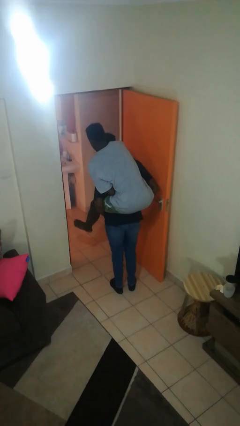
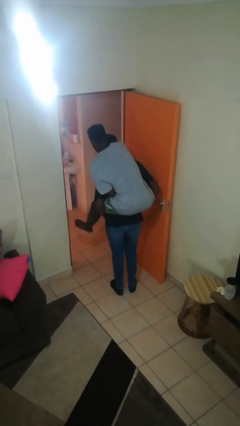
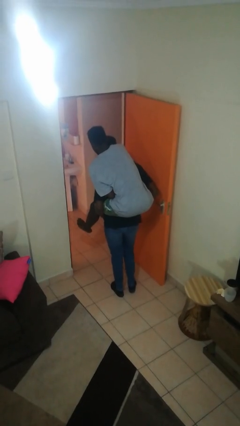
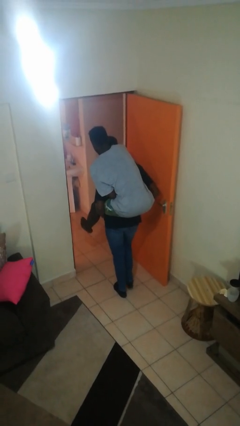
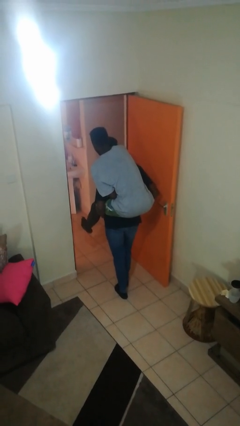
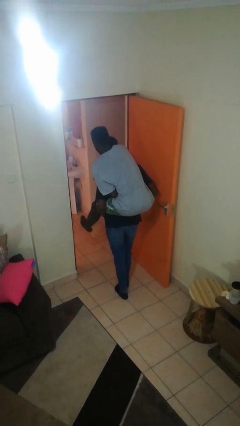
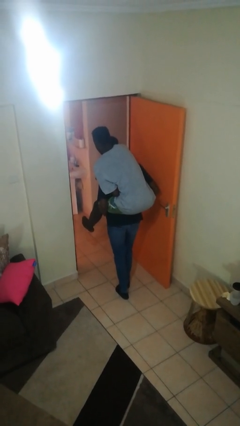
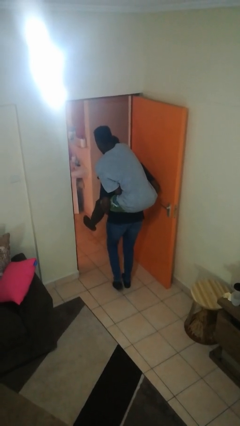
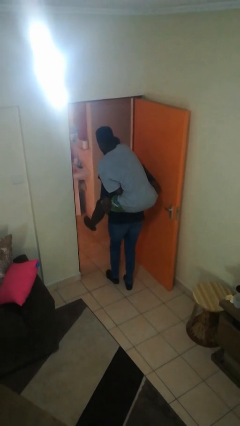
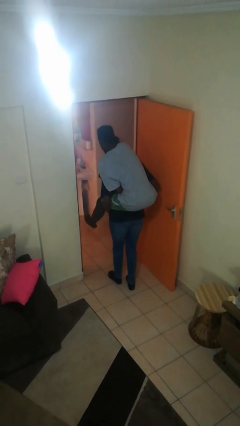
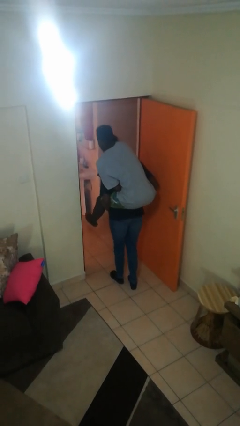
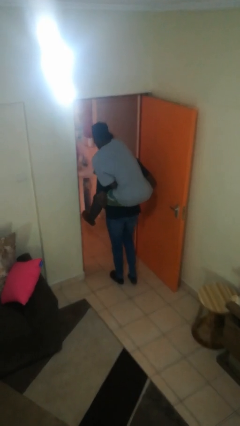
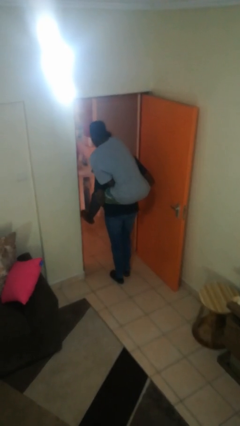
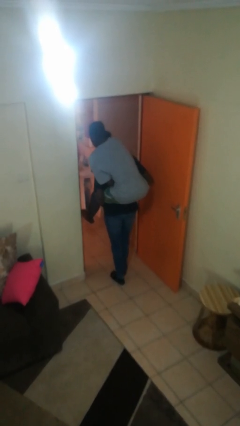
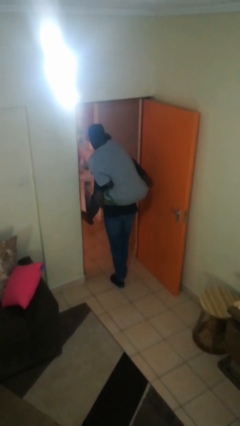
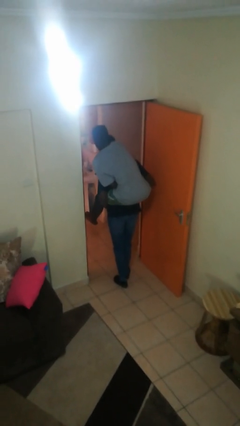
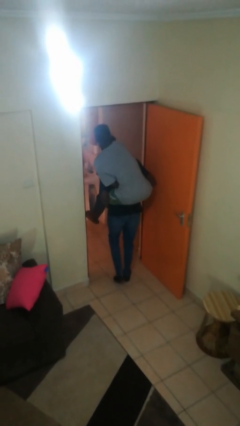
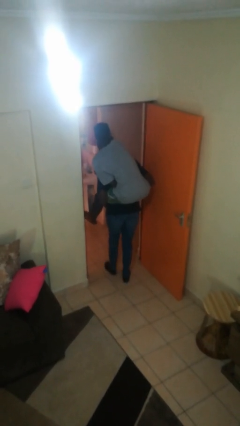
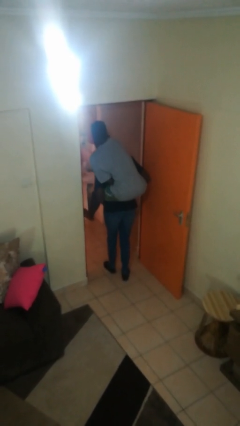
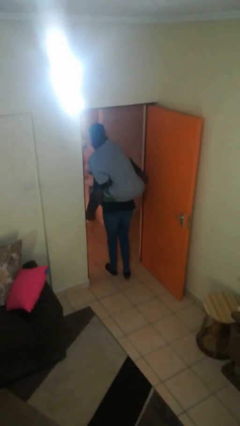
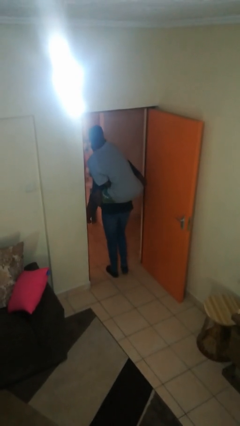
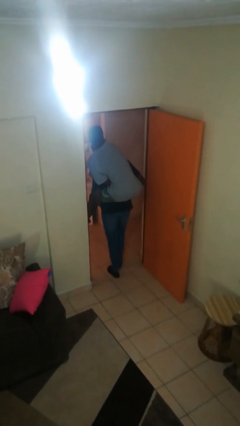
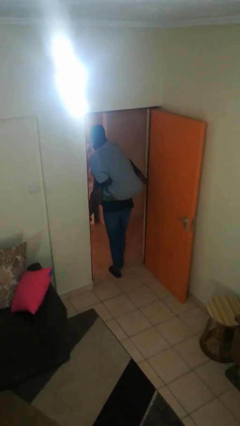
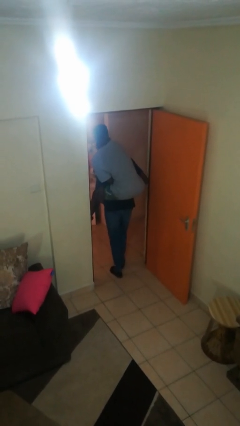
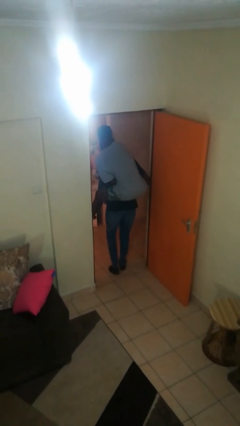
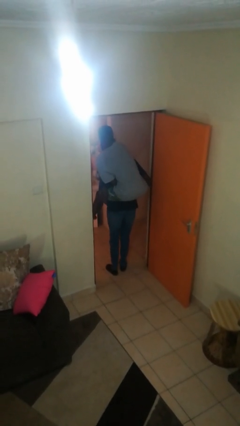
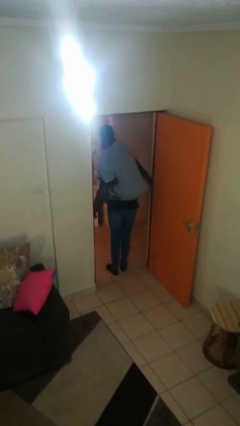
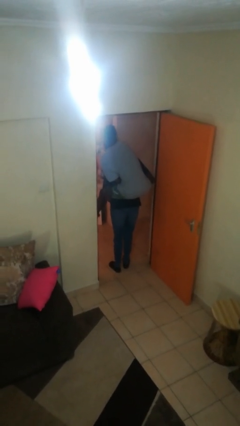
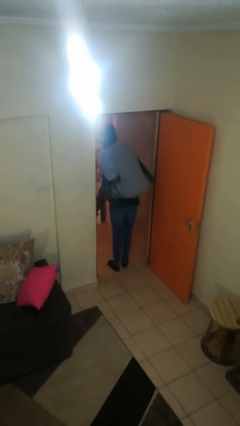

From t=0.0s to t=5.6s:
person carries person on back

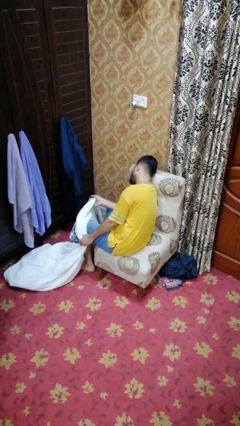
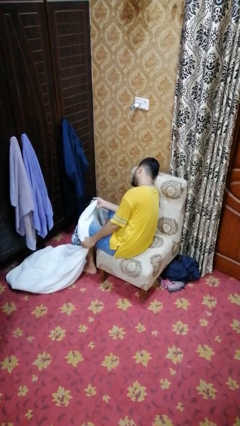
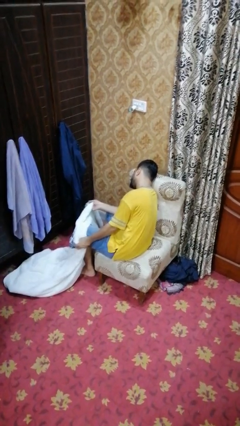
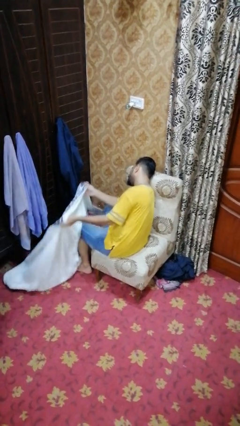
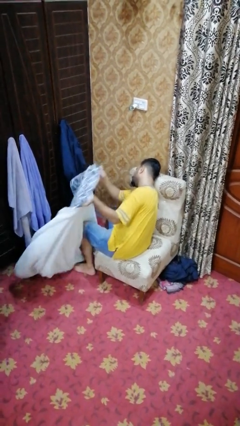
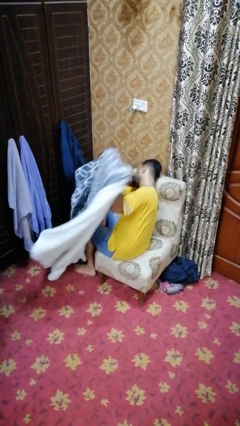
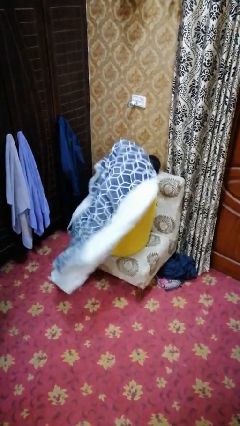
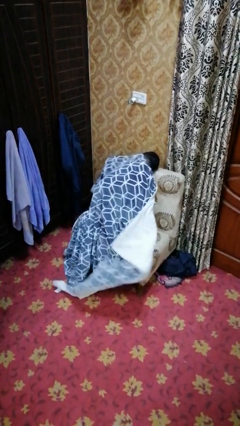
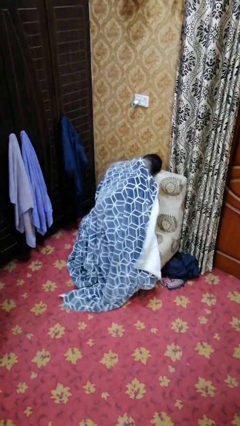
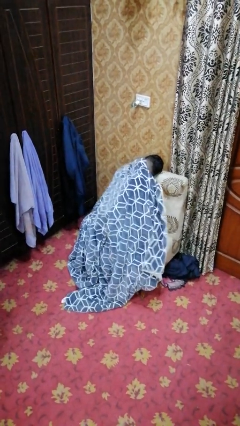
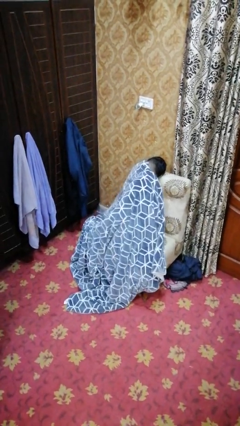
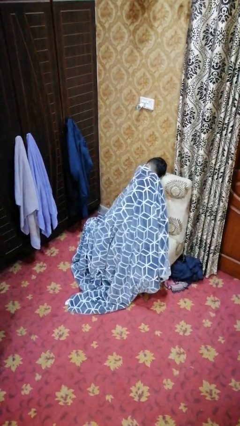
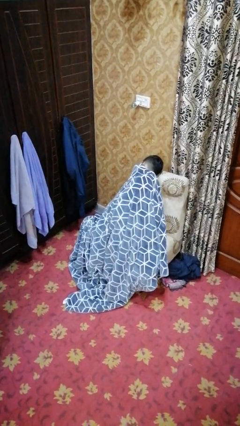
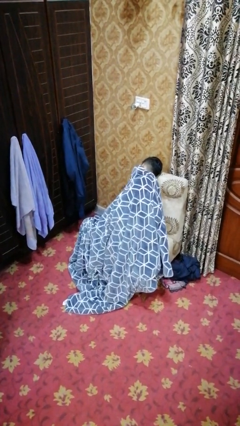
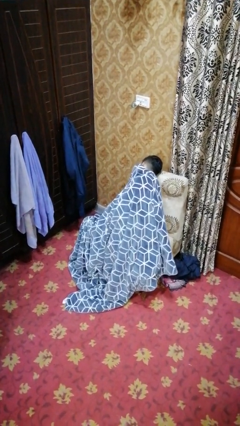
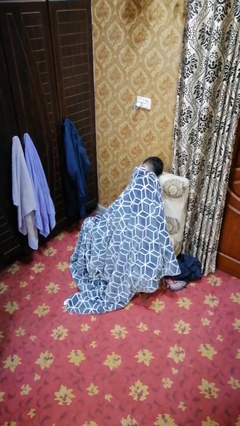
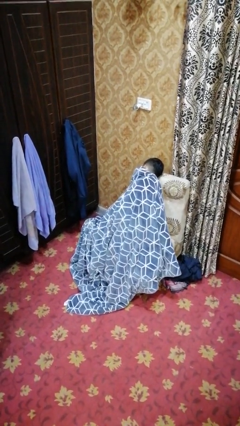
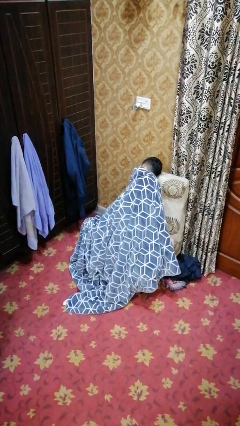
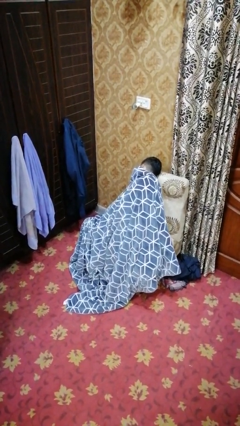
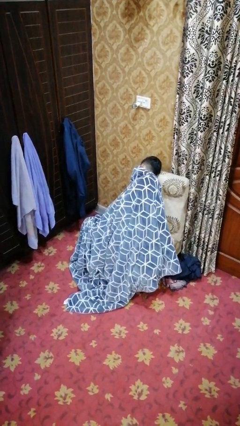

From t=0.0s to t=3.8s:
person covers with blanket

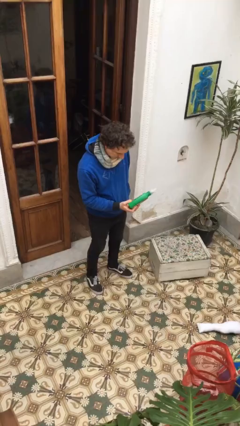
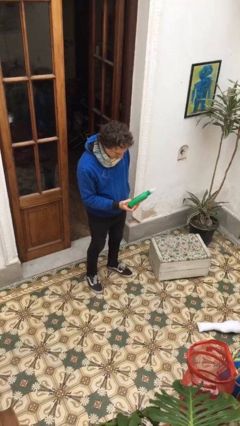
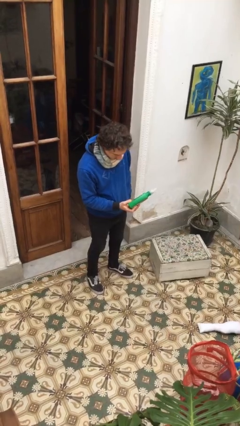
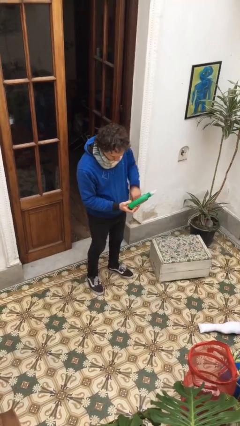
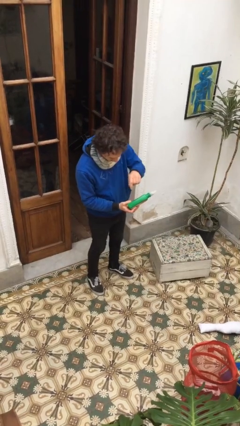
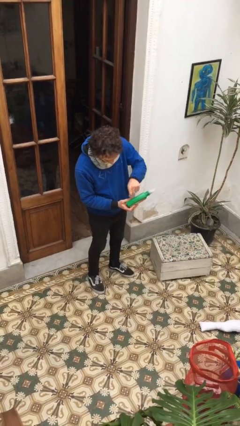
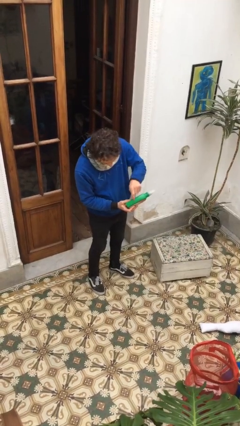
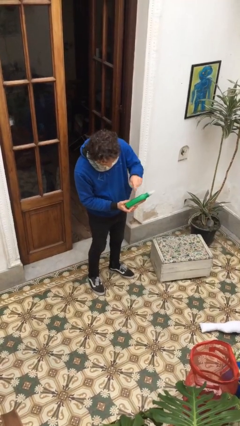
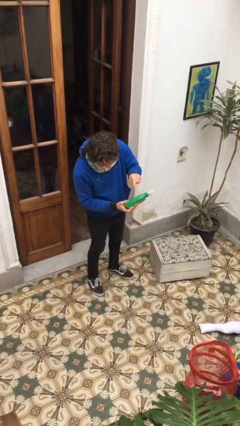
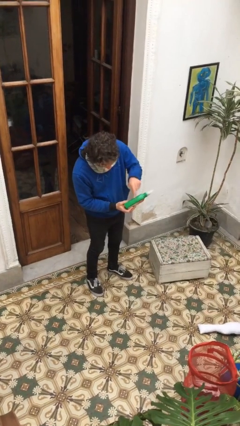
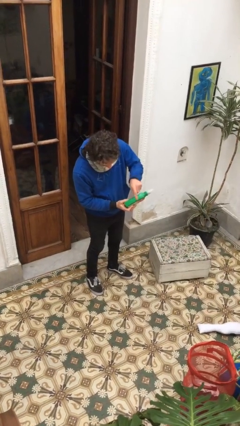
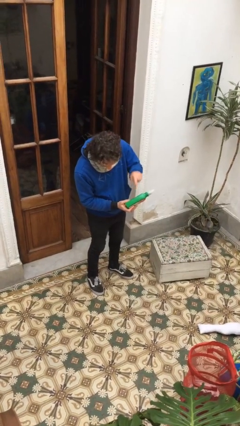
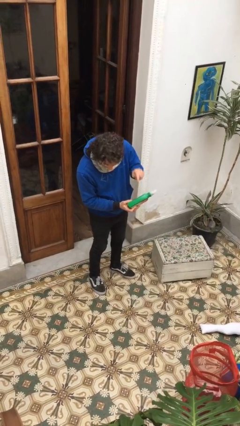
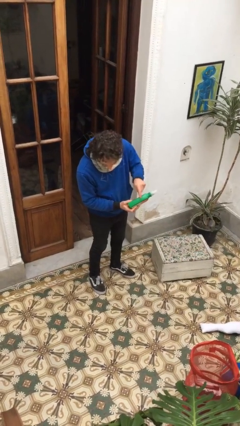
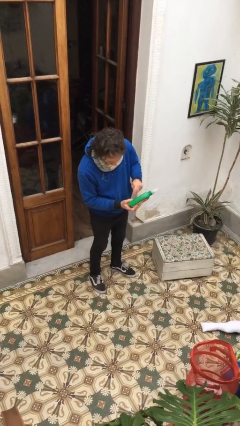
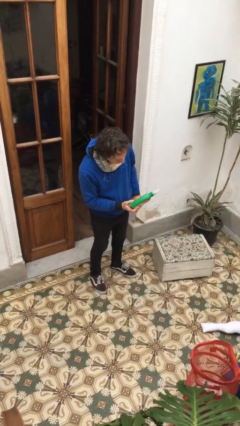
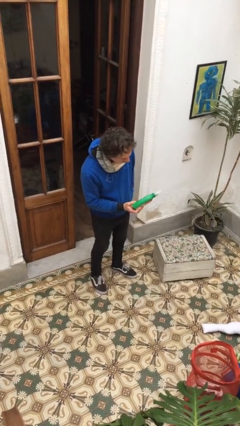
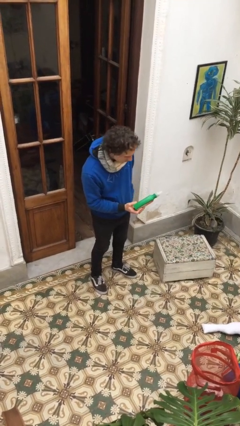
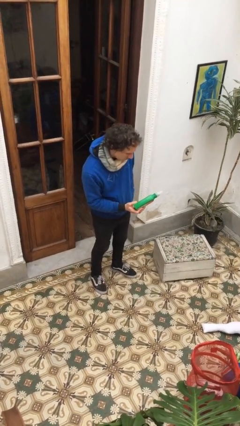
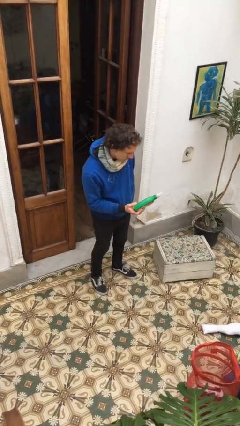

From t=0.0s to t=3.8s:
person taps object with finger

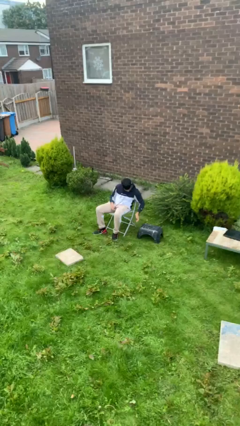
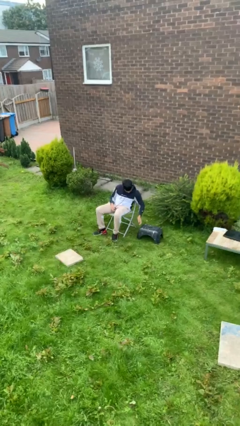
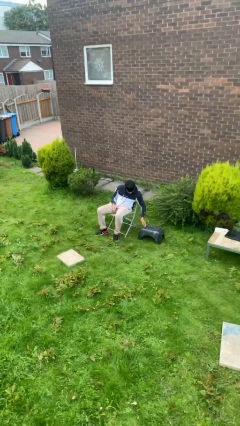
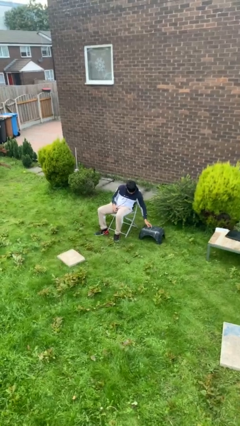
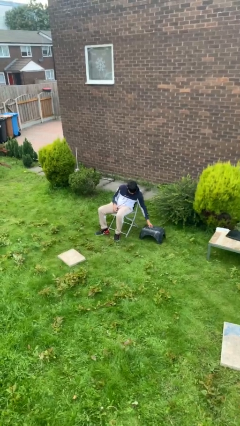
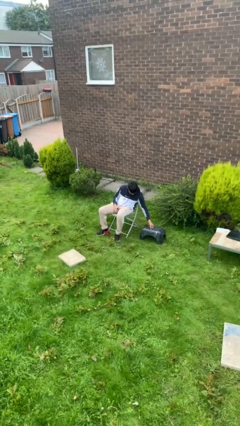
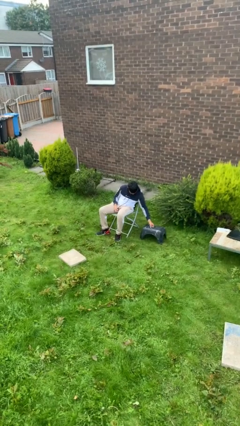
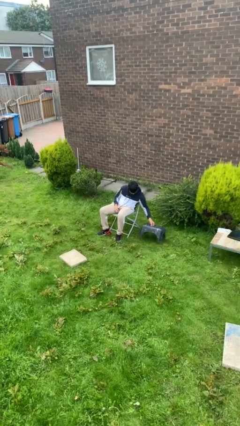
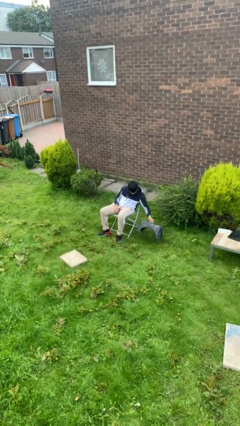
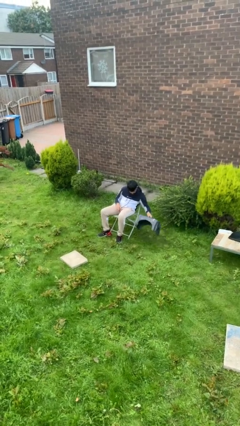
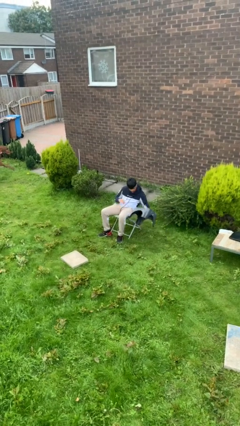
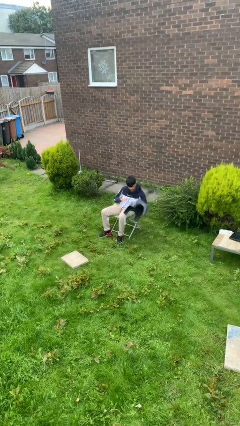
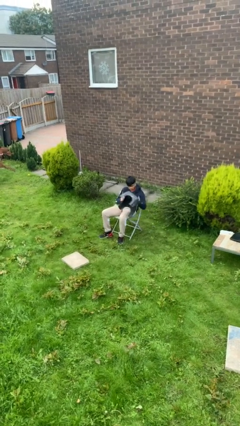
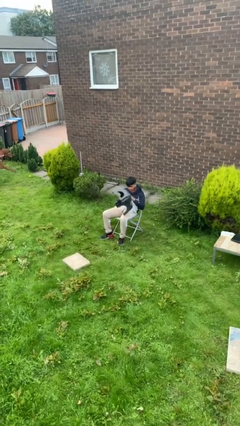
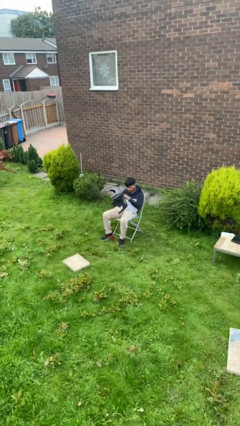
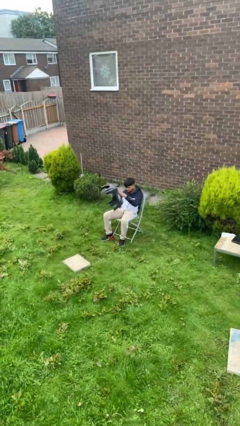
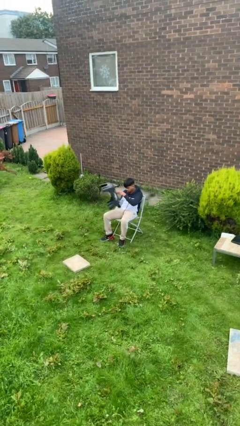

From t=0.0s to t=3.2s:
person picks up object from floor

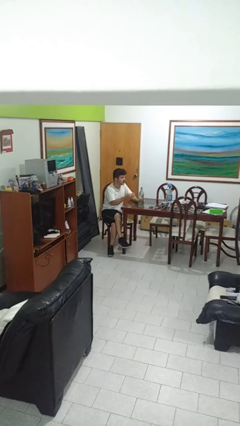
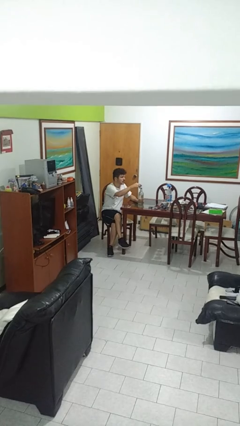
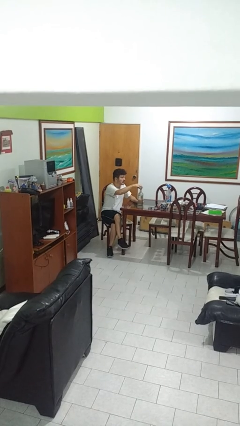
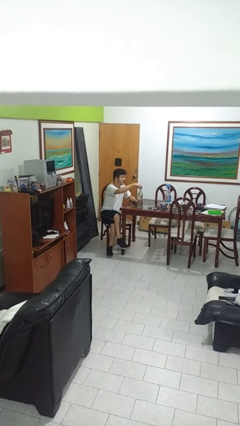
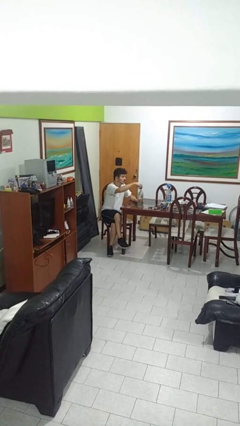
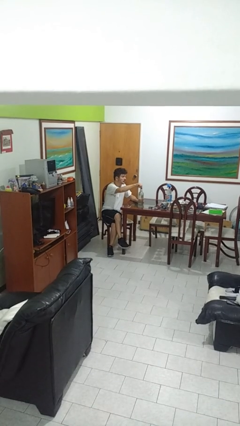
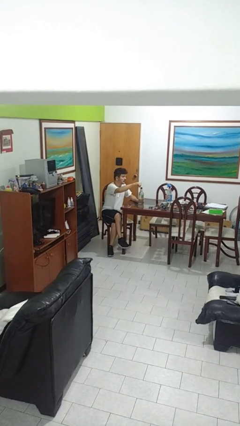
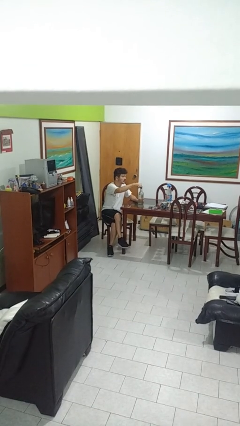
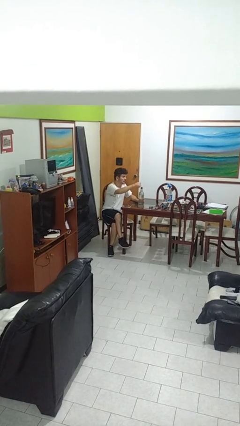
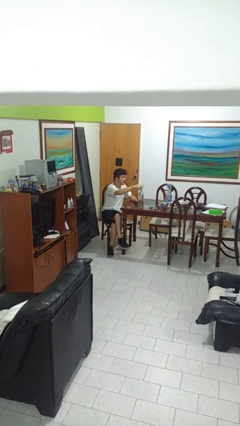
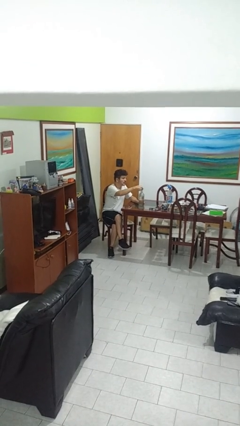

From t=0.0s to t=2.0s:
person screws lid to bottle
